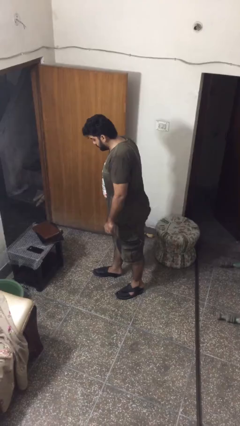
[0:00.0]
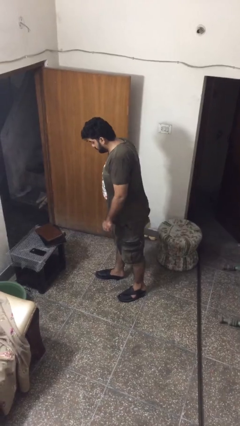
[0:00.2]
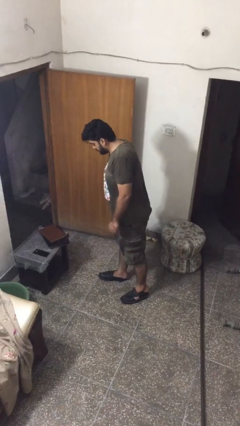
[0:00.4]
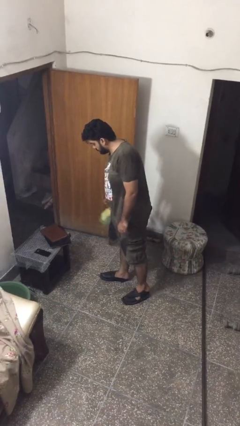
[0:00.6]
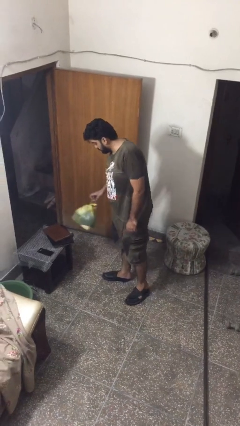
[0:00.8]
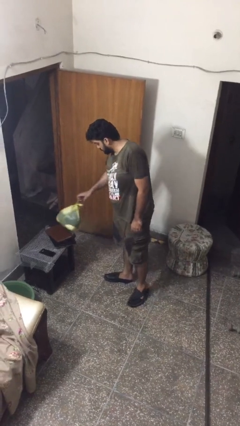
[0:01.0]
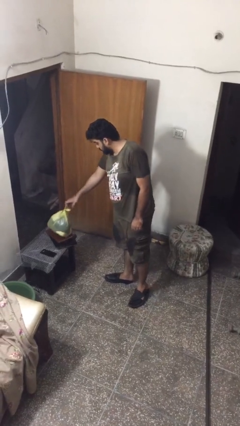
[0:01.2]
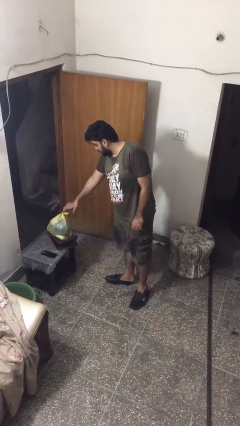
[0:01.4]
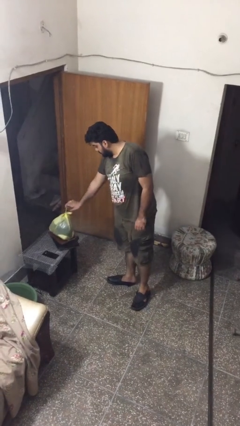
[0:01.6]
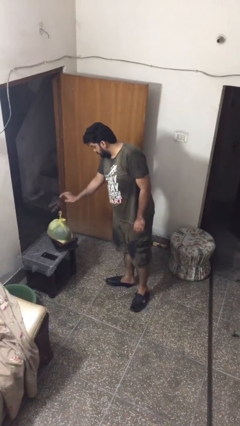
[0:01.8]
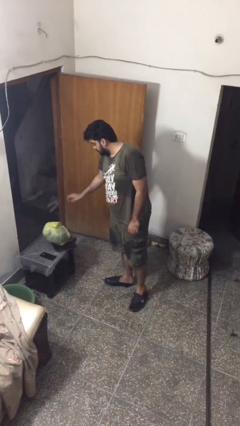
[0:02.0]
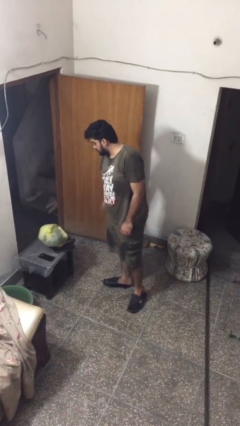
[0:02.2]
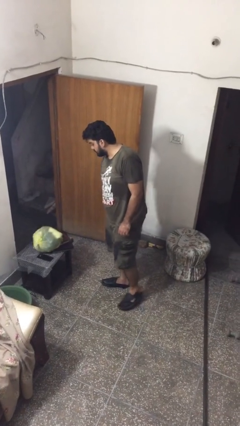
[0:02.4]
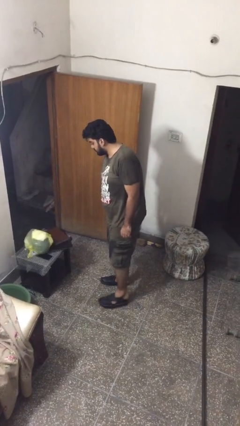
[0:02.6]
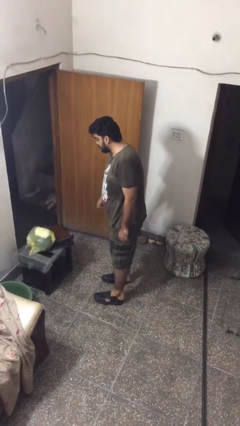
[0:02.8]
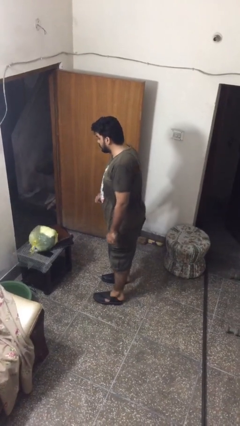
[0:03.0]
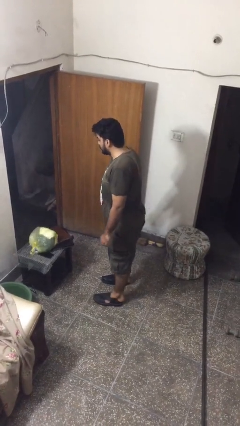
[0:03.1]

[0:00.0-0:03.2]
person puts down object on table

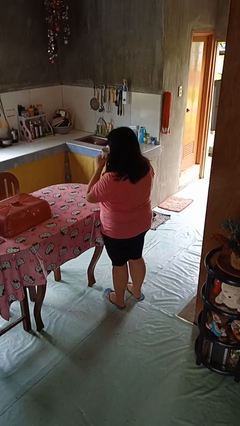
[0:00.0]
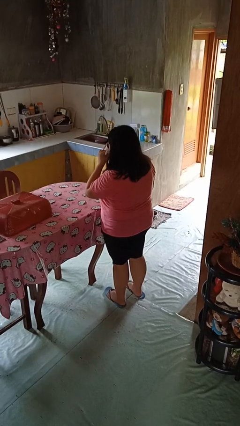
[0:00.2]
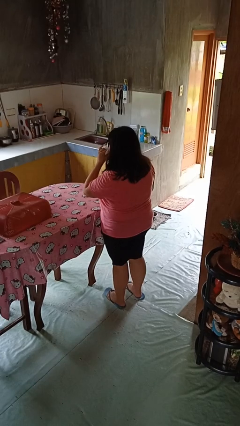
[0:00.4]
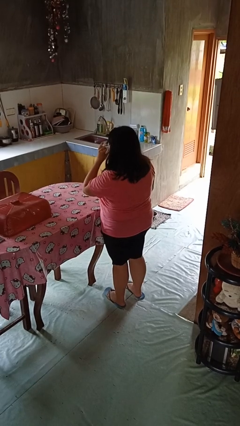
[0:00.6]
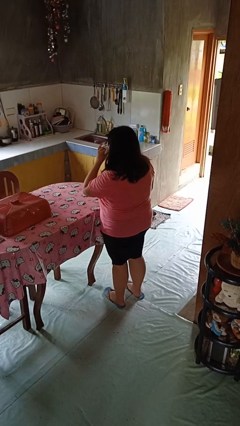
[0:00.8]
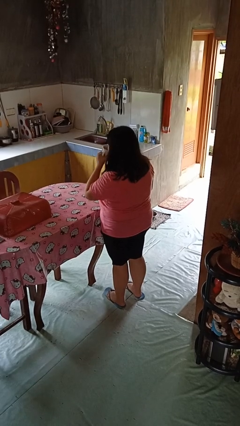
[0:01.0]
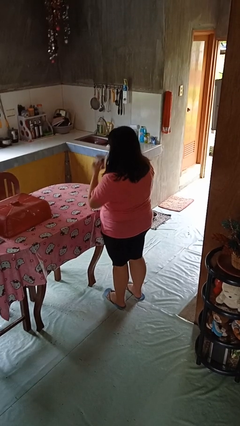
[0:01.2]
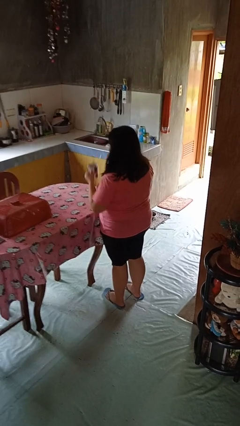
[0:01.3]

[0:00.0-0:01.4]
person drinks from mug

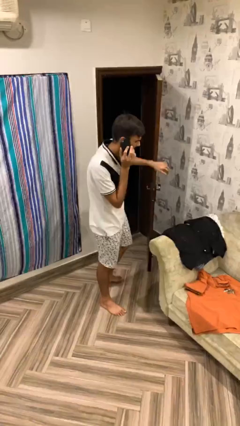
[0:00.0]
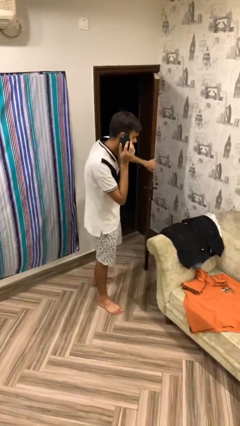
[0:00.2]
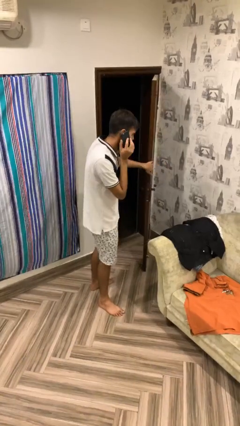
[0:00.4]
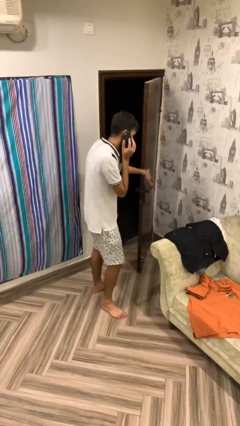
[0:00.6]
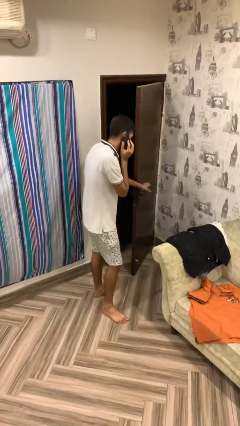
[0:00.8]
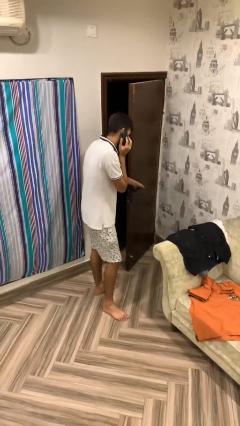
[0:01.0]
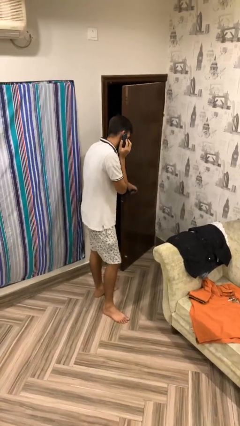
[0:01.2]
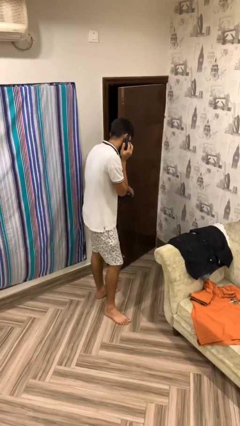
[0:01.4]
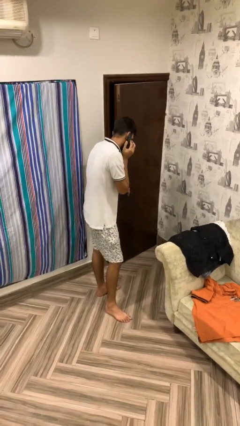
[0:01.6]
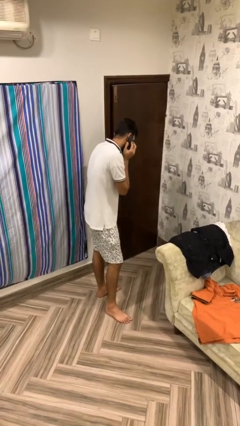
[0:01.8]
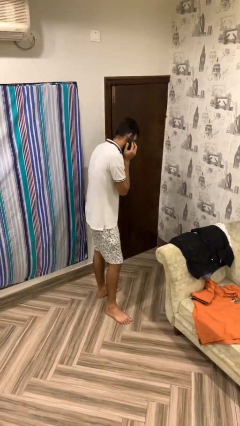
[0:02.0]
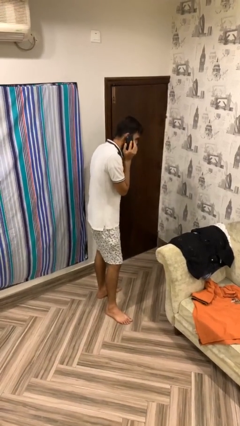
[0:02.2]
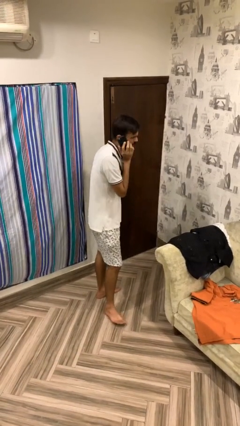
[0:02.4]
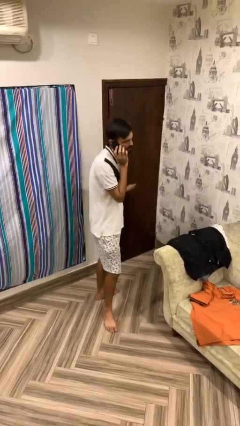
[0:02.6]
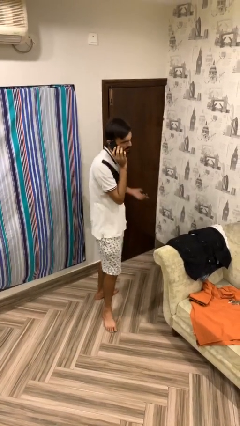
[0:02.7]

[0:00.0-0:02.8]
person closes facility door

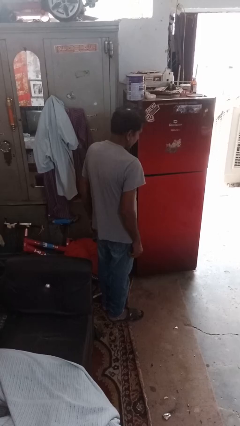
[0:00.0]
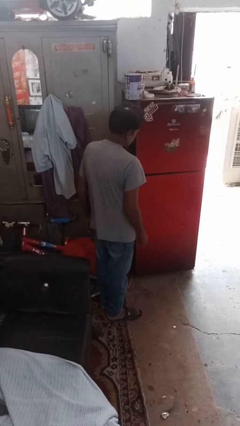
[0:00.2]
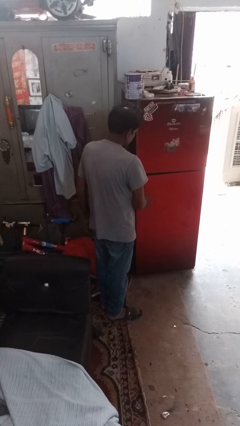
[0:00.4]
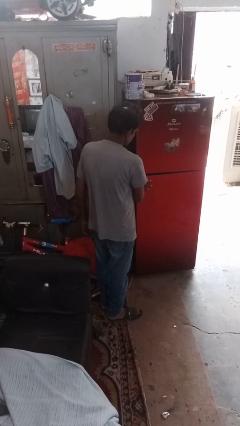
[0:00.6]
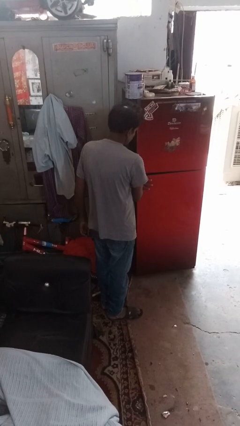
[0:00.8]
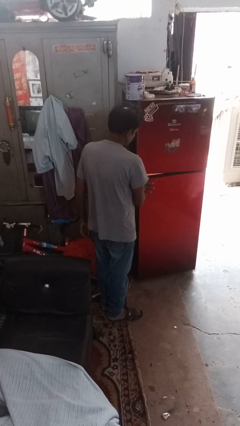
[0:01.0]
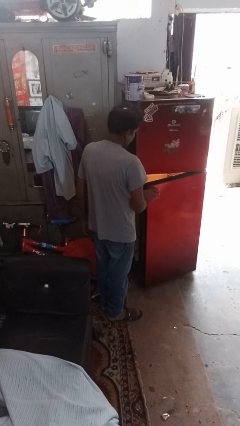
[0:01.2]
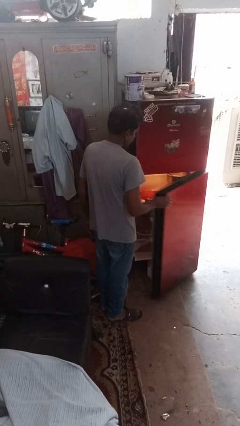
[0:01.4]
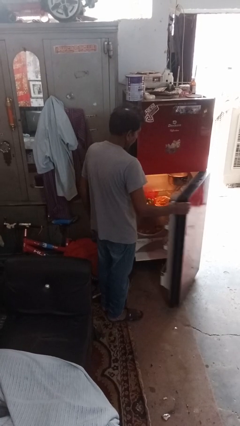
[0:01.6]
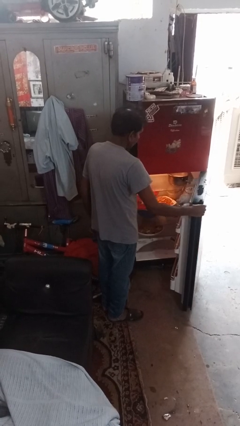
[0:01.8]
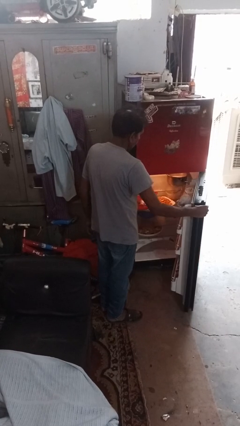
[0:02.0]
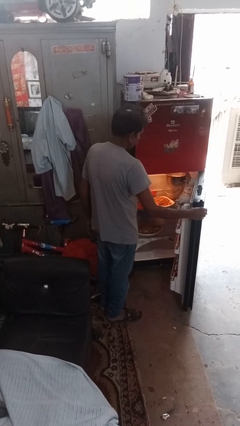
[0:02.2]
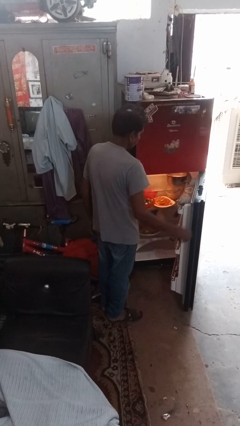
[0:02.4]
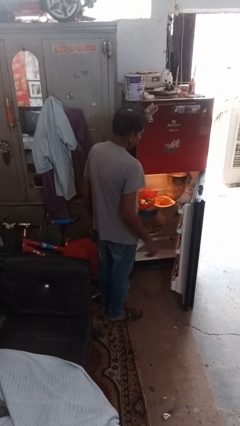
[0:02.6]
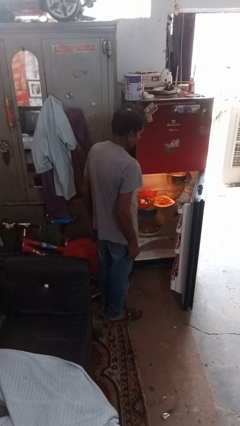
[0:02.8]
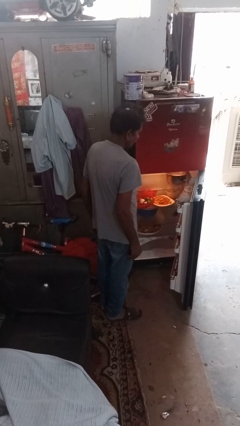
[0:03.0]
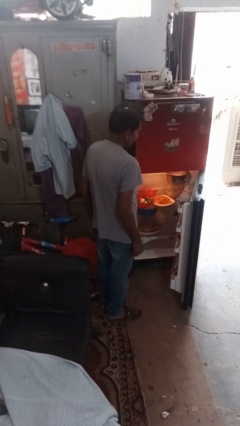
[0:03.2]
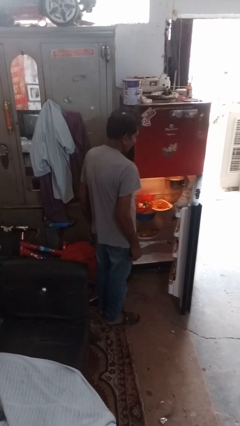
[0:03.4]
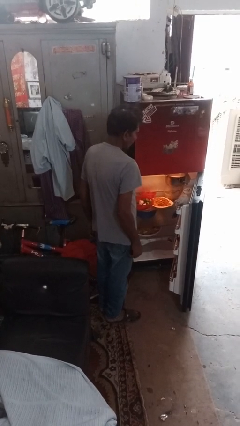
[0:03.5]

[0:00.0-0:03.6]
person opens refrigerator

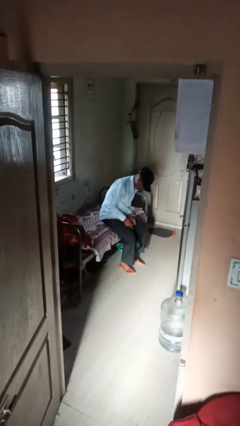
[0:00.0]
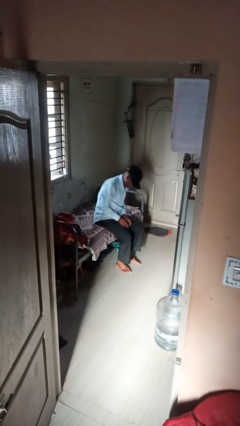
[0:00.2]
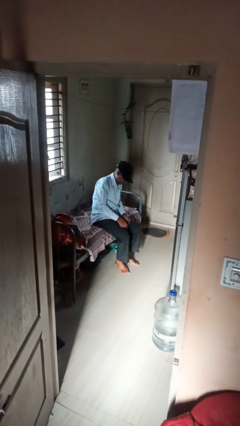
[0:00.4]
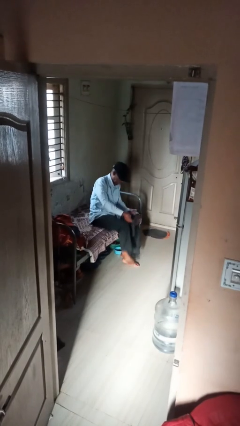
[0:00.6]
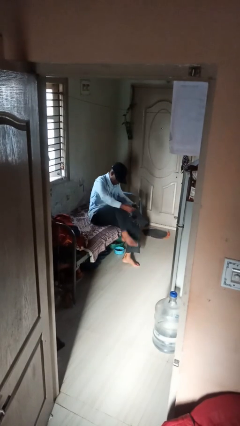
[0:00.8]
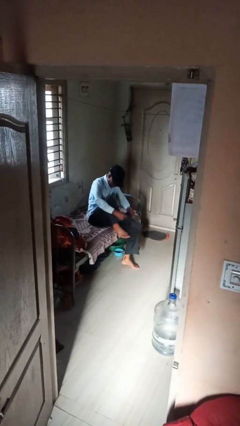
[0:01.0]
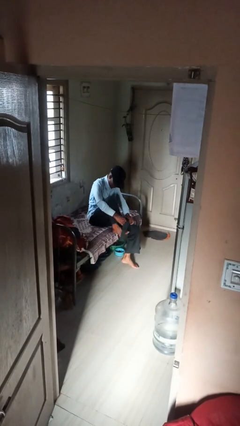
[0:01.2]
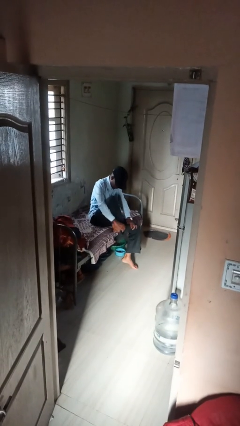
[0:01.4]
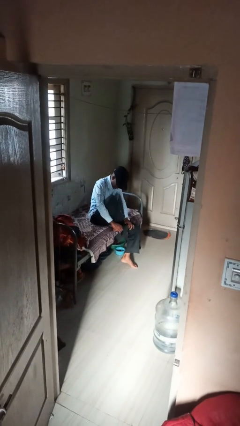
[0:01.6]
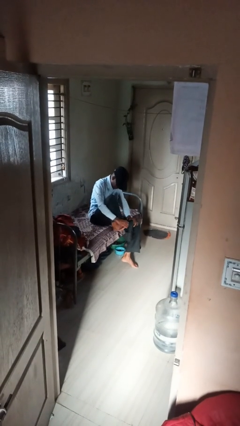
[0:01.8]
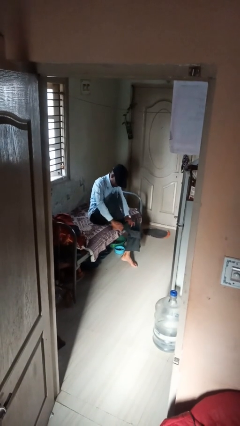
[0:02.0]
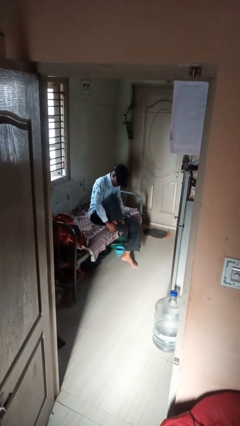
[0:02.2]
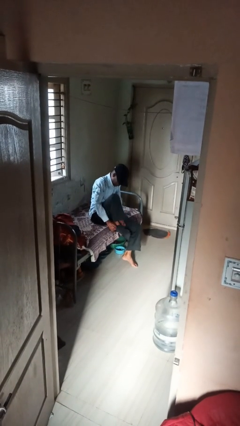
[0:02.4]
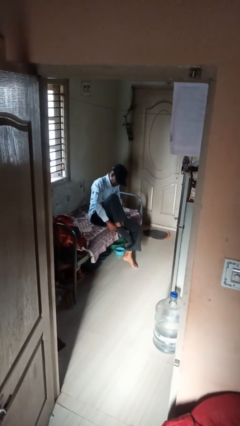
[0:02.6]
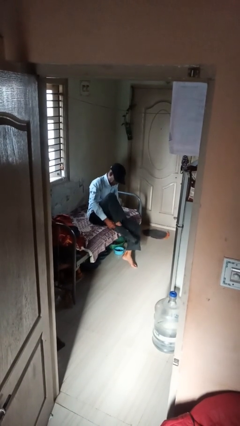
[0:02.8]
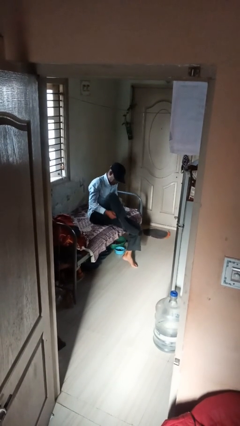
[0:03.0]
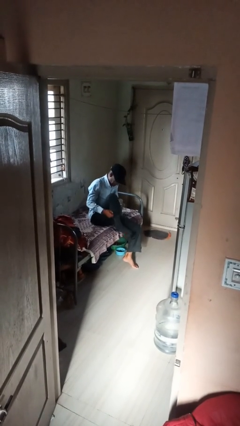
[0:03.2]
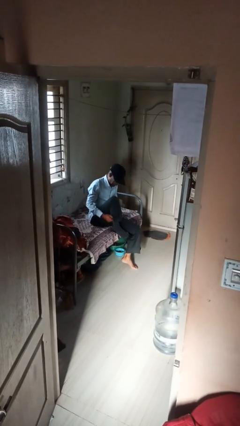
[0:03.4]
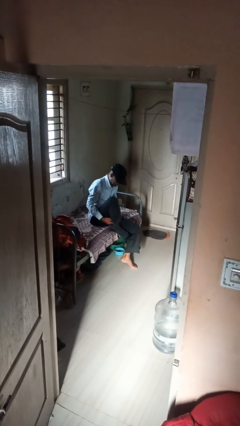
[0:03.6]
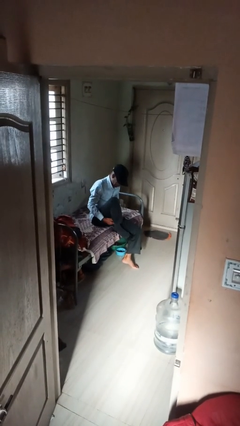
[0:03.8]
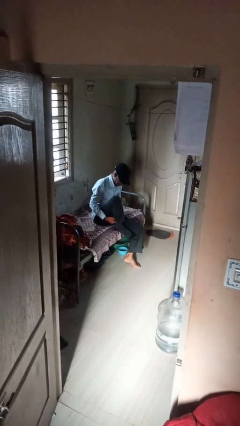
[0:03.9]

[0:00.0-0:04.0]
person puts on socks

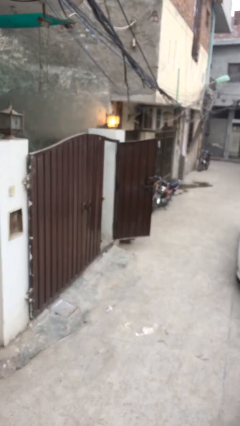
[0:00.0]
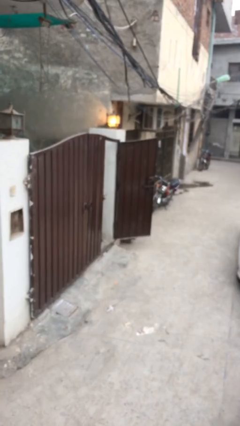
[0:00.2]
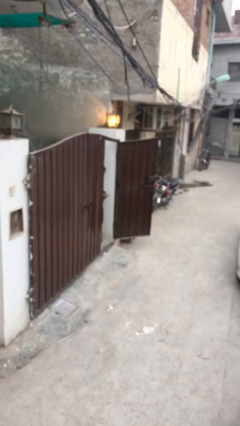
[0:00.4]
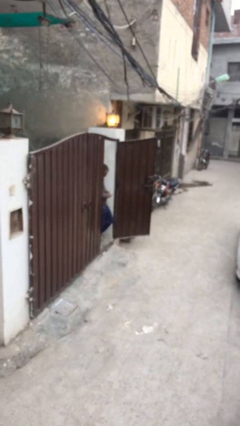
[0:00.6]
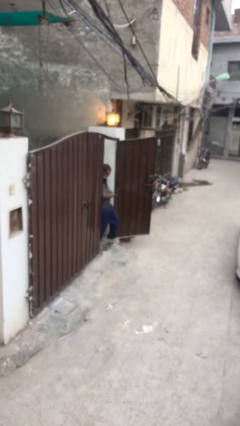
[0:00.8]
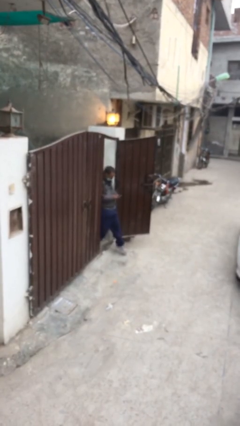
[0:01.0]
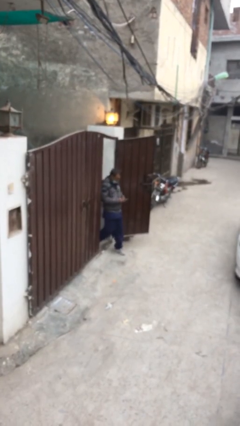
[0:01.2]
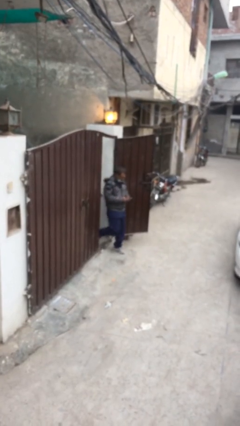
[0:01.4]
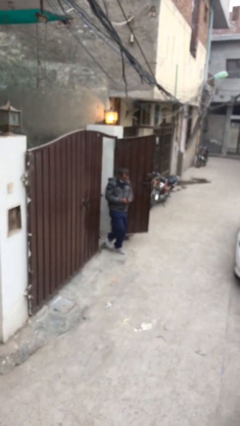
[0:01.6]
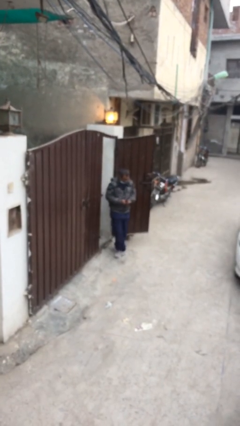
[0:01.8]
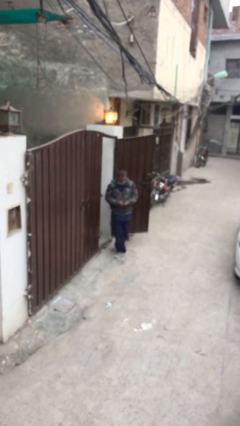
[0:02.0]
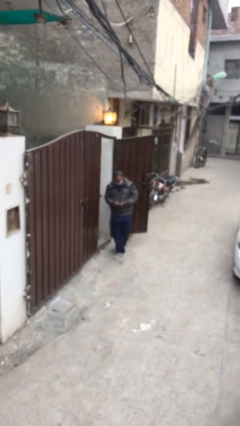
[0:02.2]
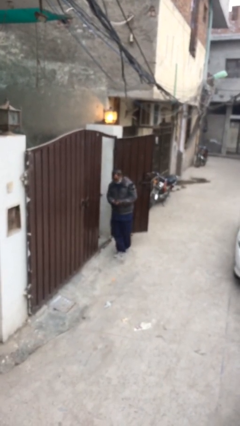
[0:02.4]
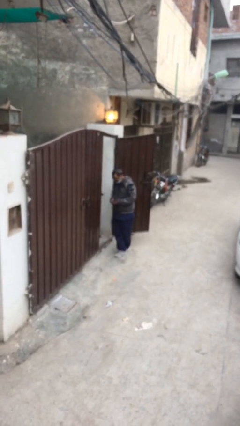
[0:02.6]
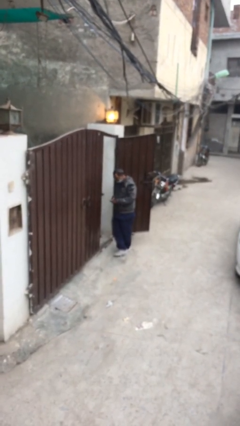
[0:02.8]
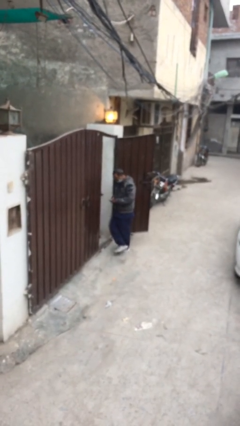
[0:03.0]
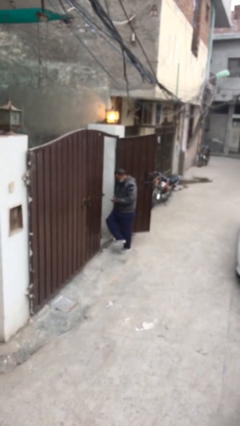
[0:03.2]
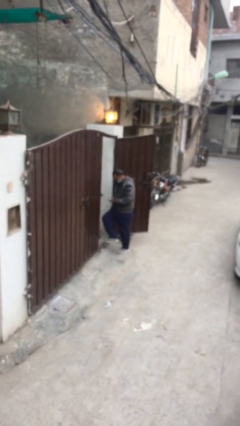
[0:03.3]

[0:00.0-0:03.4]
person enters scene through structure
